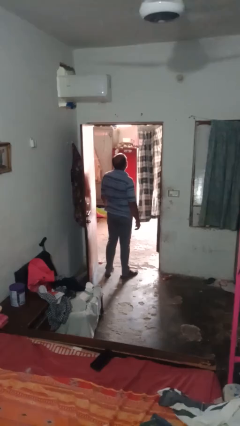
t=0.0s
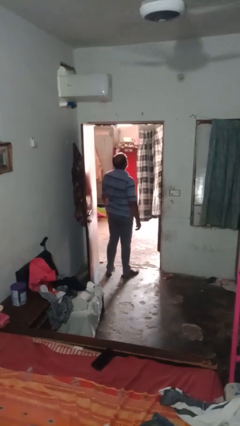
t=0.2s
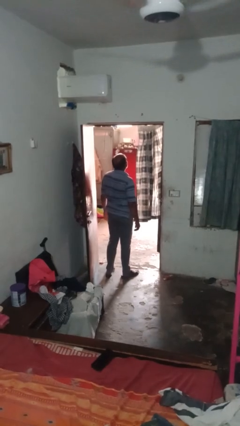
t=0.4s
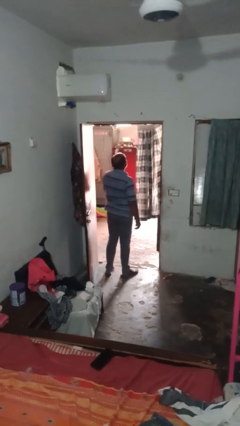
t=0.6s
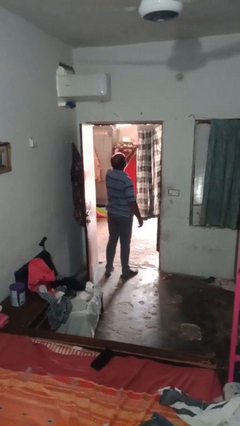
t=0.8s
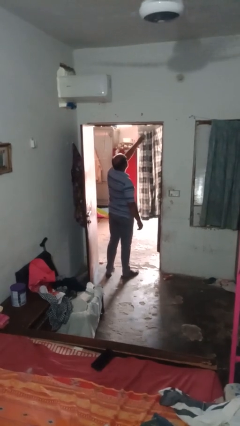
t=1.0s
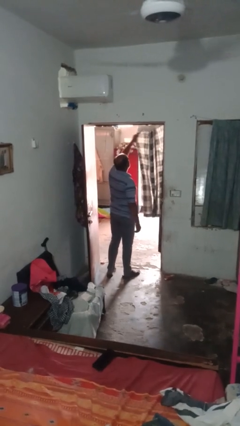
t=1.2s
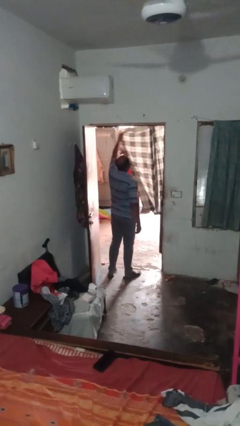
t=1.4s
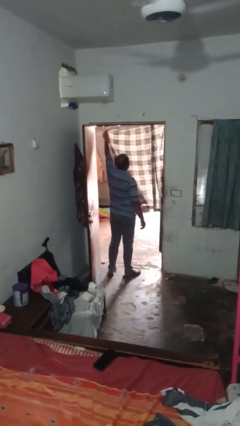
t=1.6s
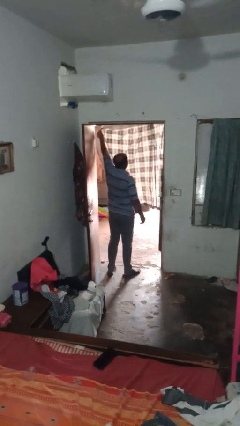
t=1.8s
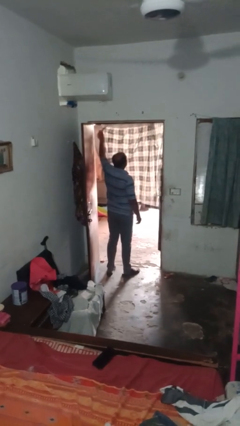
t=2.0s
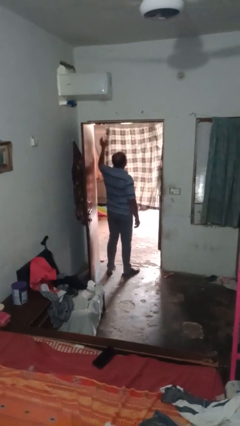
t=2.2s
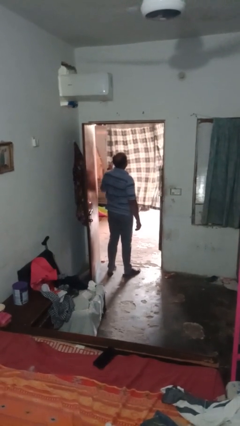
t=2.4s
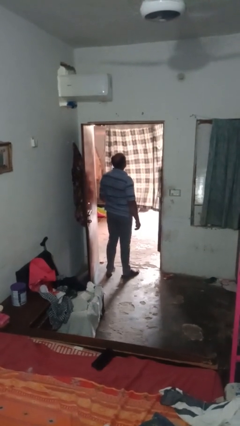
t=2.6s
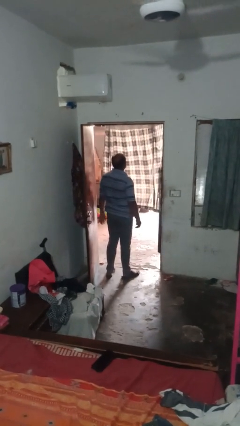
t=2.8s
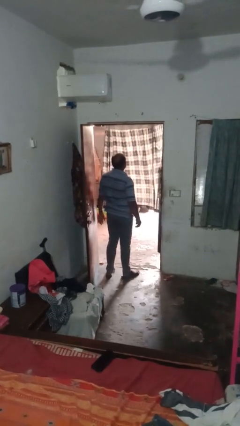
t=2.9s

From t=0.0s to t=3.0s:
person closes curtains

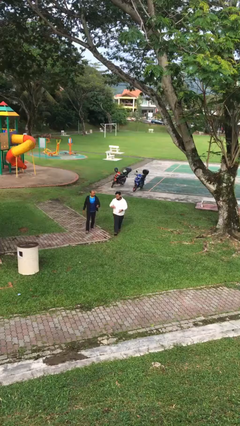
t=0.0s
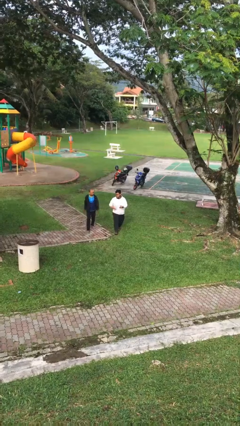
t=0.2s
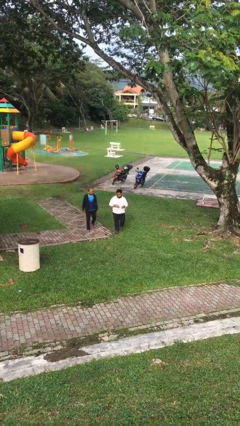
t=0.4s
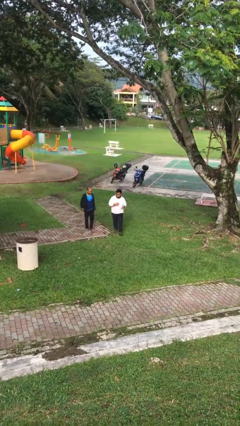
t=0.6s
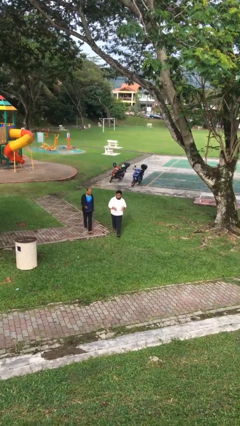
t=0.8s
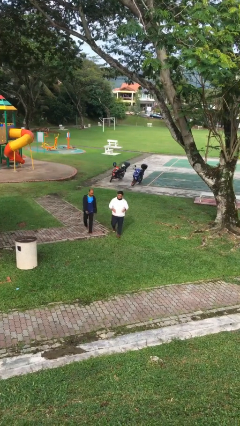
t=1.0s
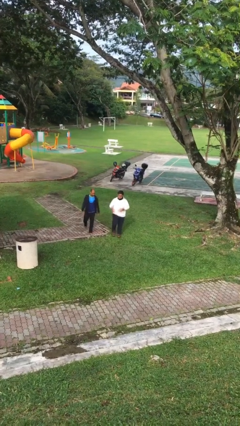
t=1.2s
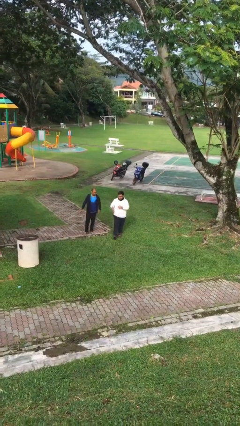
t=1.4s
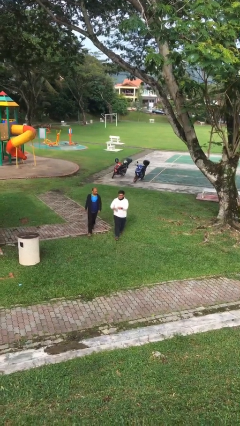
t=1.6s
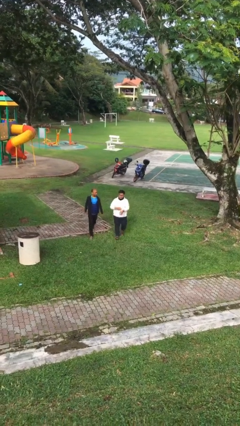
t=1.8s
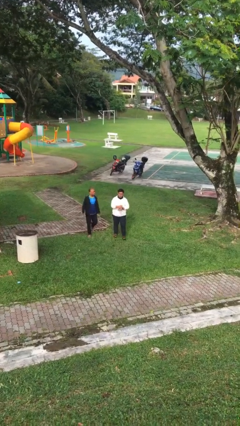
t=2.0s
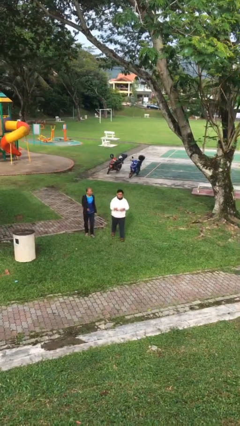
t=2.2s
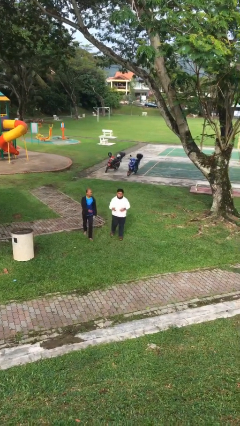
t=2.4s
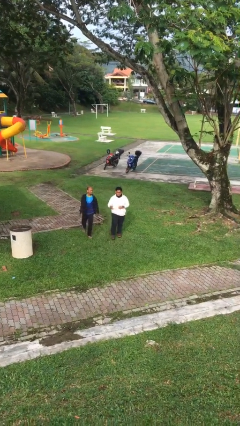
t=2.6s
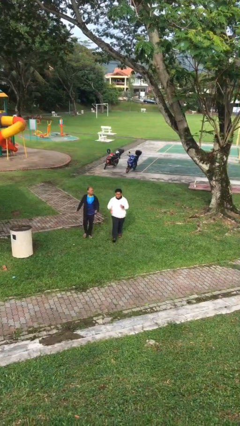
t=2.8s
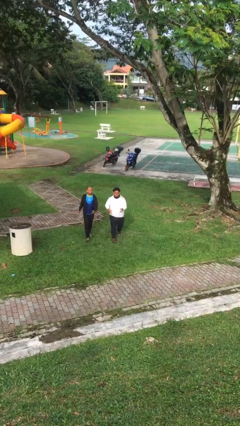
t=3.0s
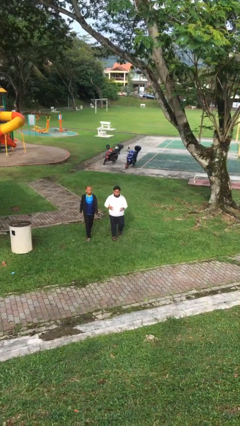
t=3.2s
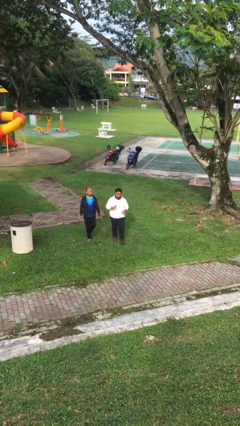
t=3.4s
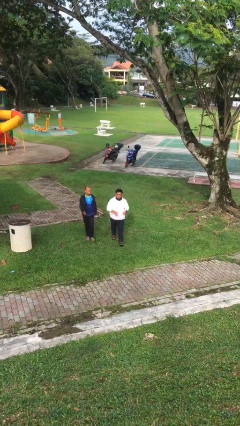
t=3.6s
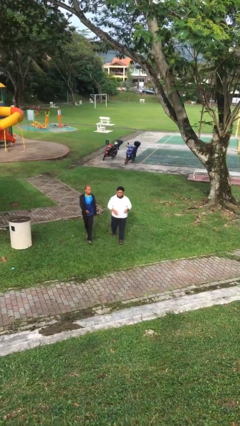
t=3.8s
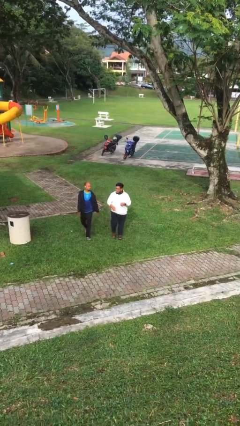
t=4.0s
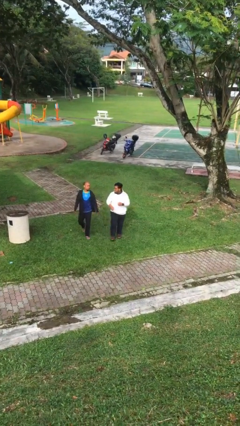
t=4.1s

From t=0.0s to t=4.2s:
person talks to person

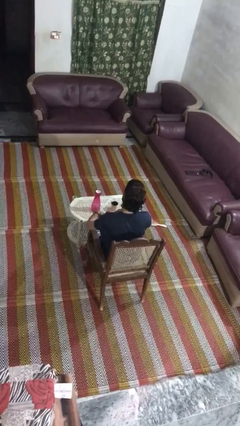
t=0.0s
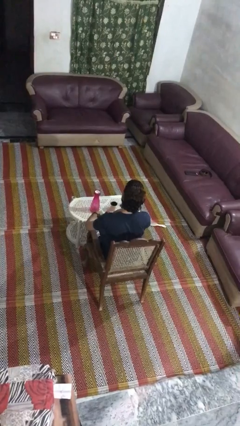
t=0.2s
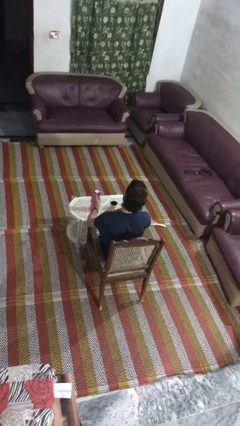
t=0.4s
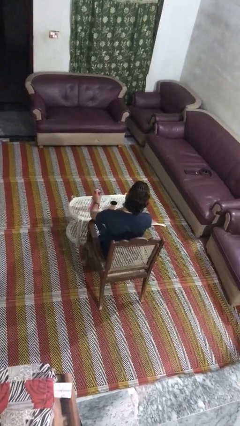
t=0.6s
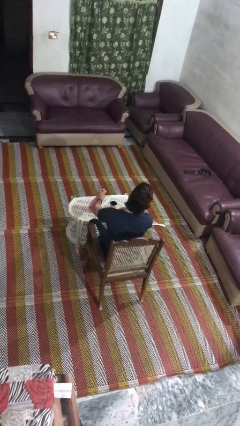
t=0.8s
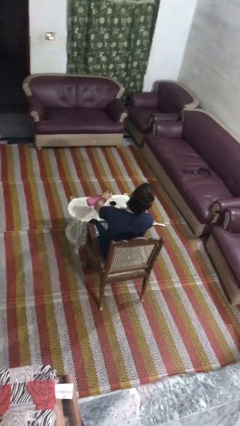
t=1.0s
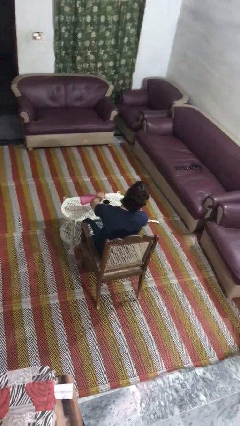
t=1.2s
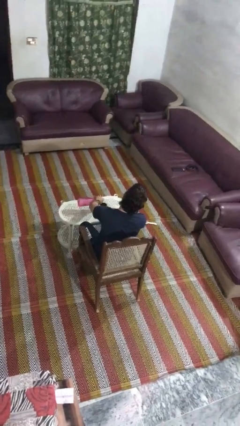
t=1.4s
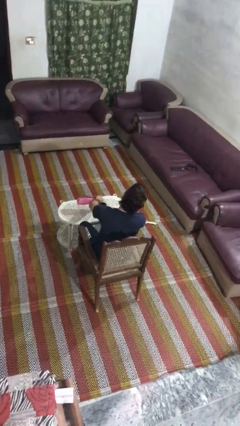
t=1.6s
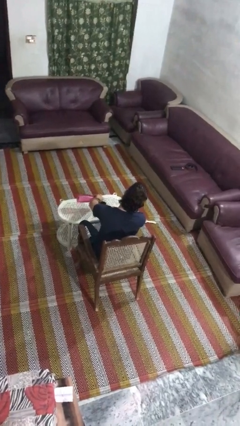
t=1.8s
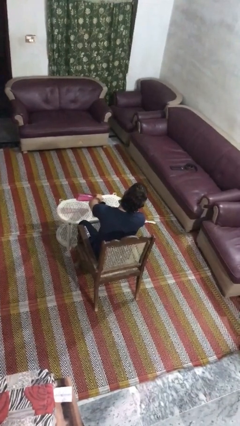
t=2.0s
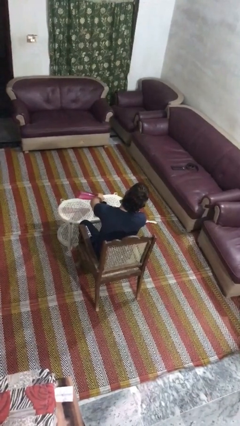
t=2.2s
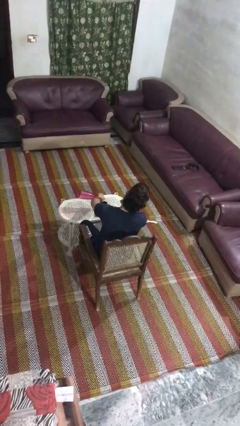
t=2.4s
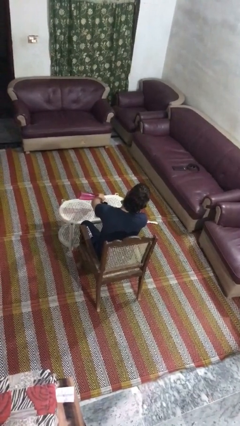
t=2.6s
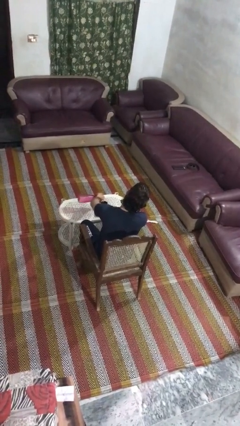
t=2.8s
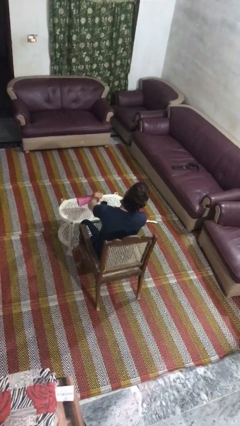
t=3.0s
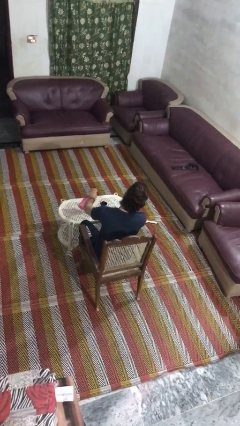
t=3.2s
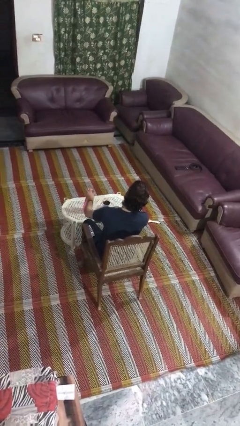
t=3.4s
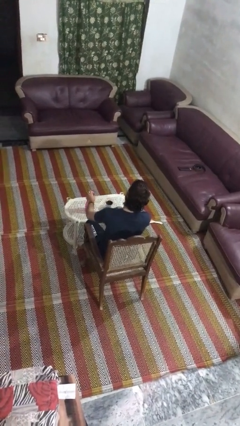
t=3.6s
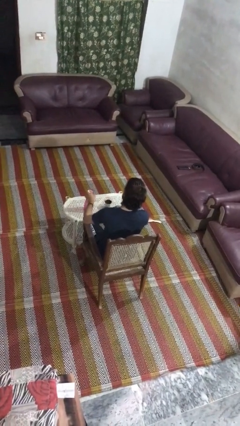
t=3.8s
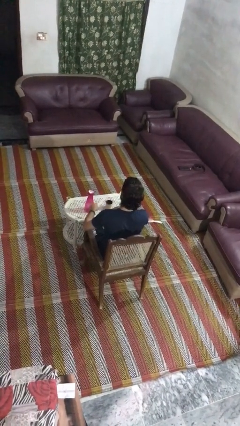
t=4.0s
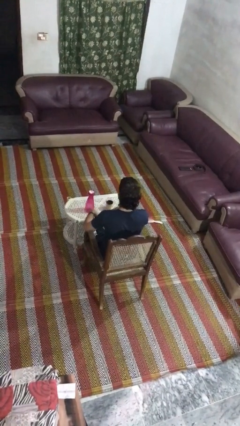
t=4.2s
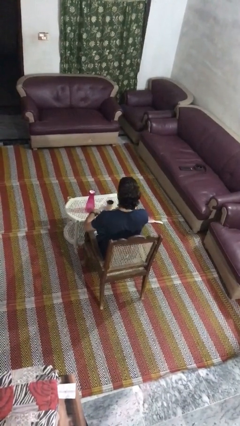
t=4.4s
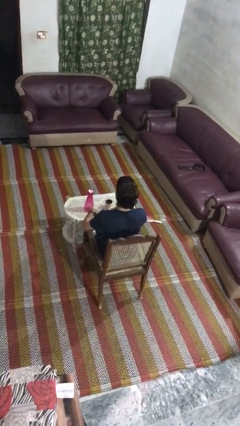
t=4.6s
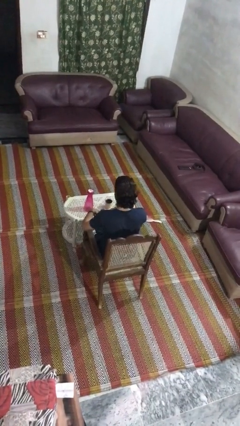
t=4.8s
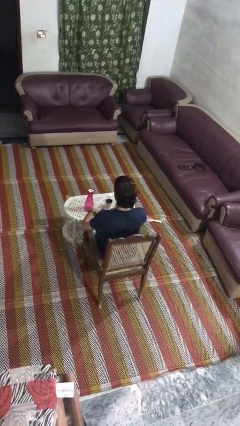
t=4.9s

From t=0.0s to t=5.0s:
person pours liquid into cup

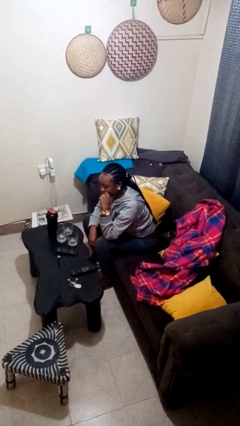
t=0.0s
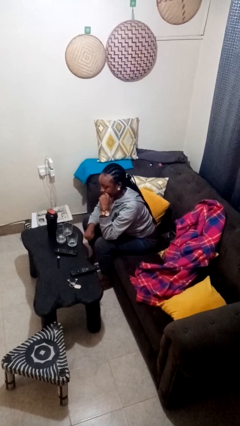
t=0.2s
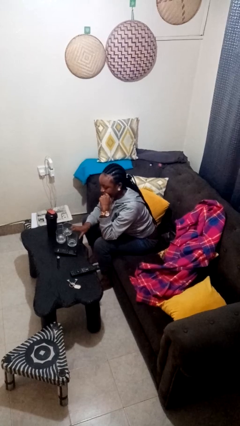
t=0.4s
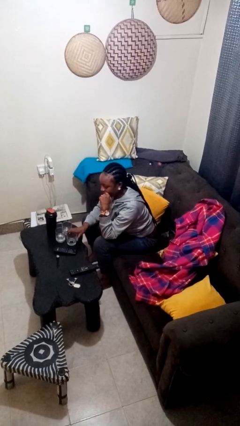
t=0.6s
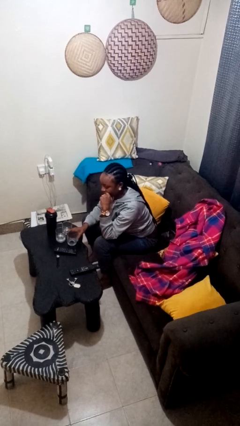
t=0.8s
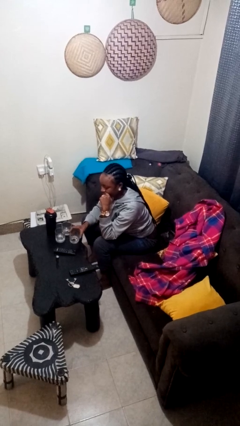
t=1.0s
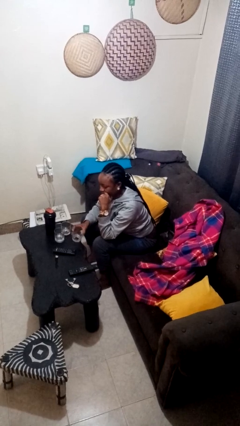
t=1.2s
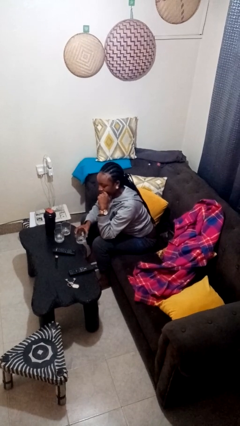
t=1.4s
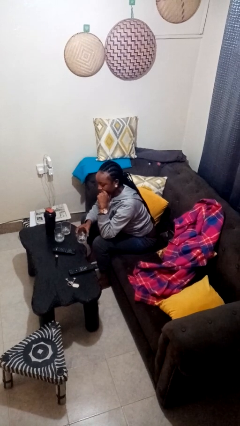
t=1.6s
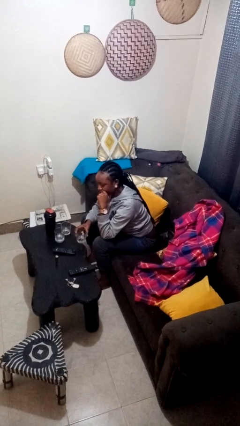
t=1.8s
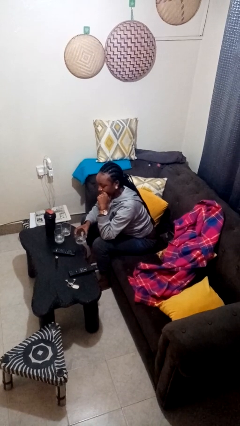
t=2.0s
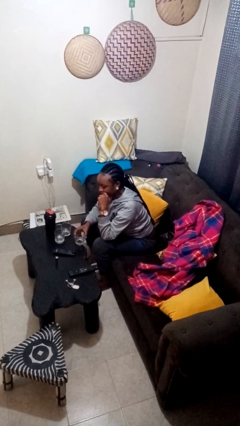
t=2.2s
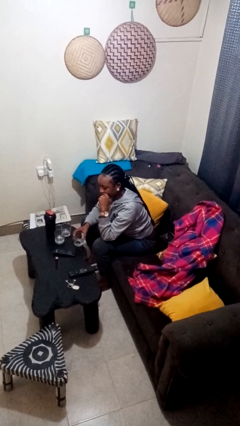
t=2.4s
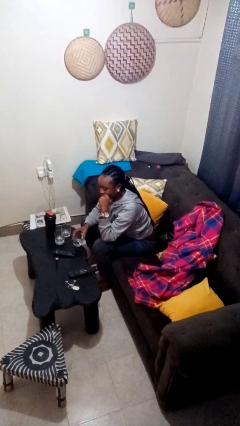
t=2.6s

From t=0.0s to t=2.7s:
person picks up object from table

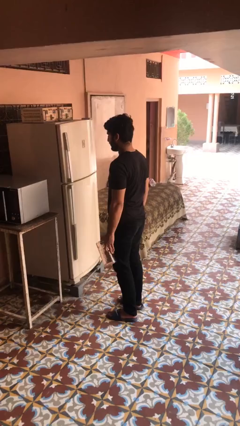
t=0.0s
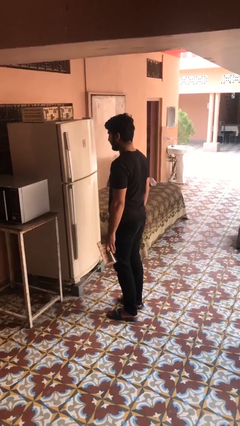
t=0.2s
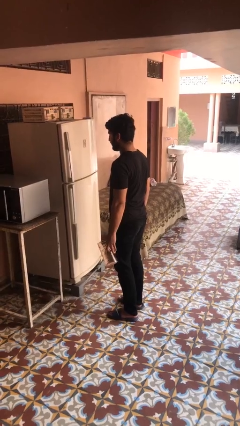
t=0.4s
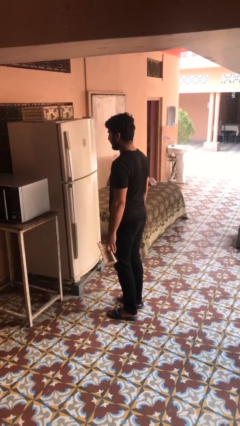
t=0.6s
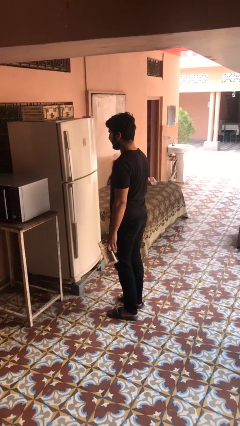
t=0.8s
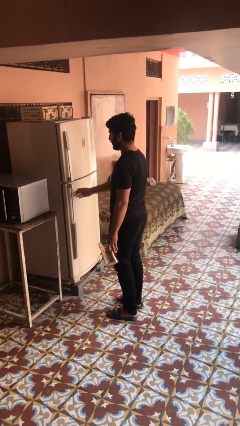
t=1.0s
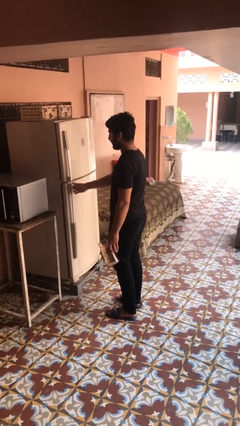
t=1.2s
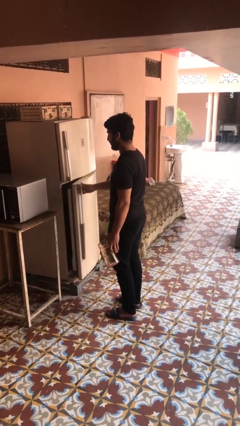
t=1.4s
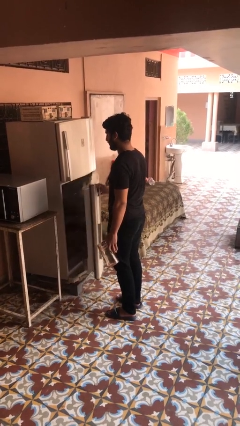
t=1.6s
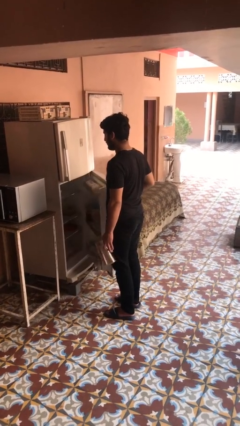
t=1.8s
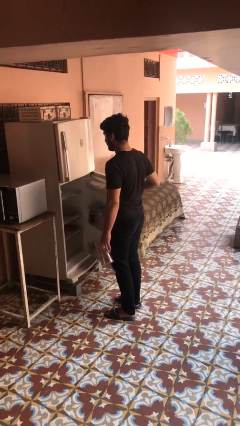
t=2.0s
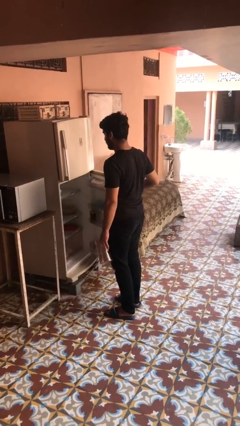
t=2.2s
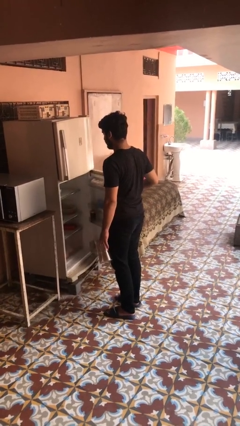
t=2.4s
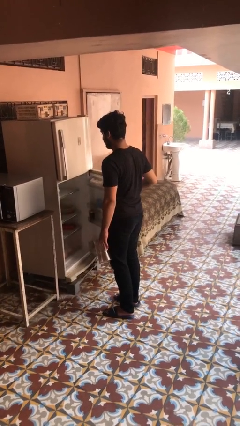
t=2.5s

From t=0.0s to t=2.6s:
person opens refrigerator

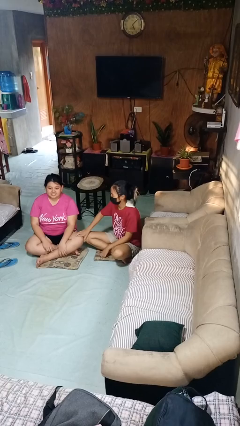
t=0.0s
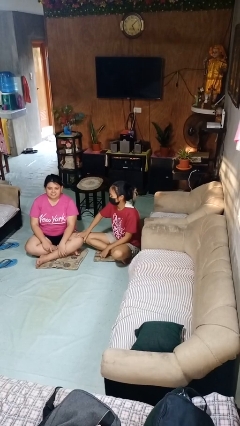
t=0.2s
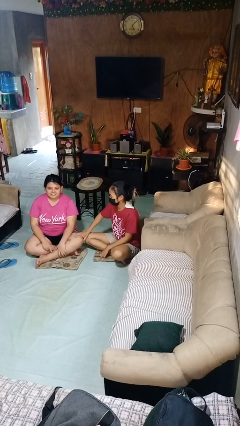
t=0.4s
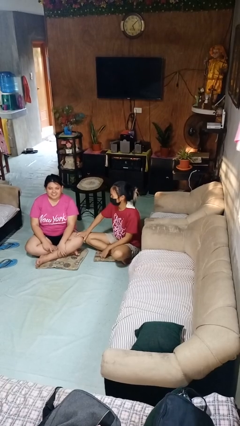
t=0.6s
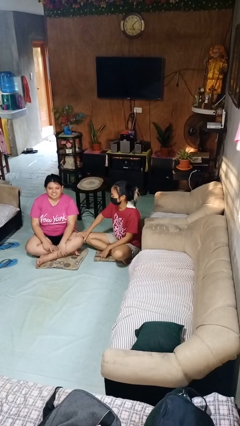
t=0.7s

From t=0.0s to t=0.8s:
person tickles person
